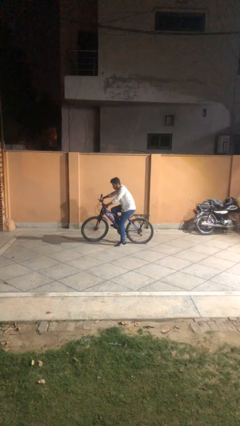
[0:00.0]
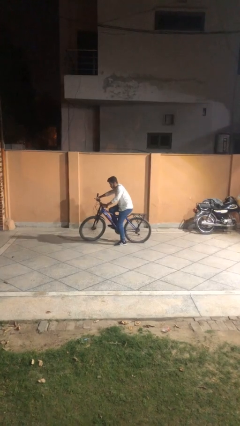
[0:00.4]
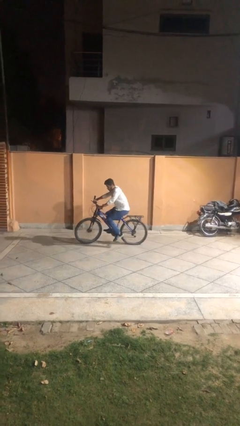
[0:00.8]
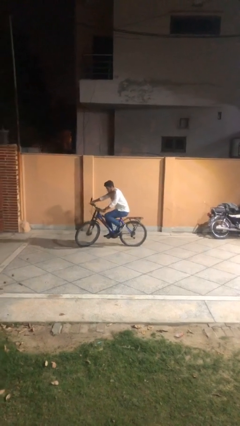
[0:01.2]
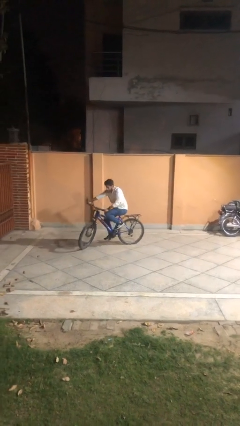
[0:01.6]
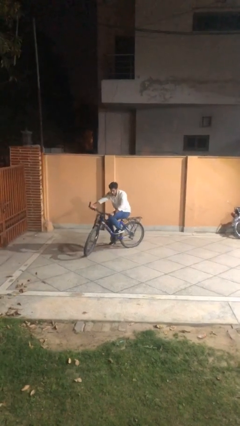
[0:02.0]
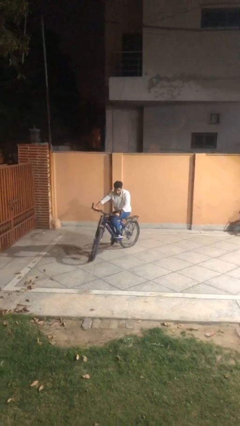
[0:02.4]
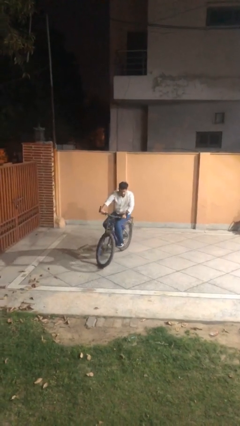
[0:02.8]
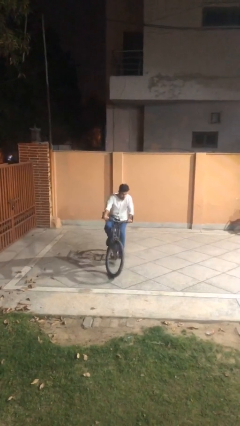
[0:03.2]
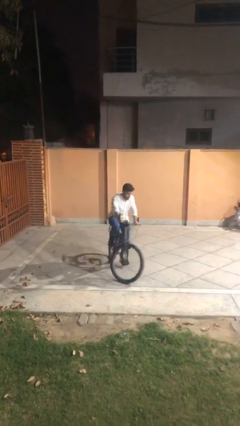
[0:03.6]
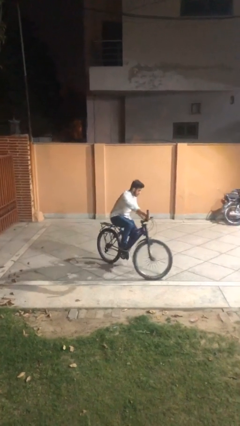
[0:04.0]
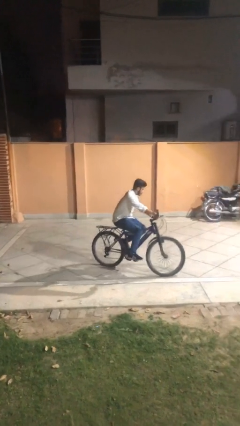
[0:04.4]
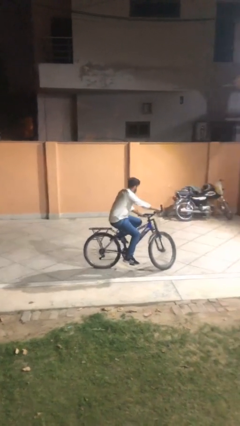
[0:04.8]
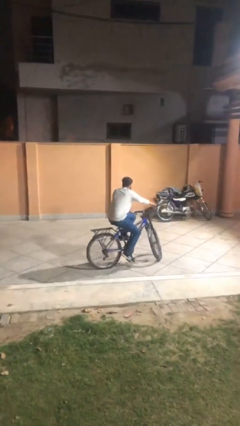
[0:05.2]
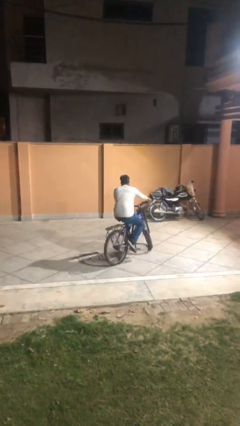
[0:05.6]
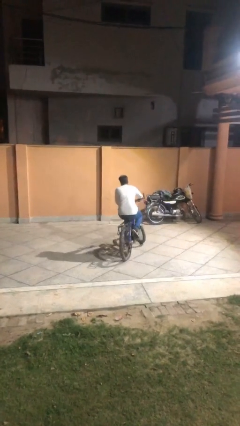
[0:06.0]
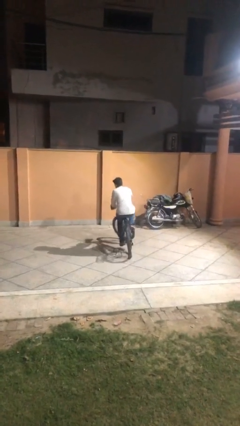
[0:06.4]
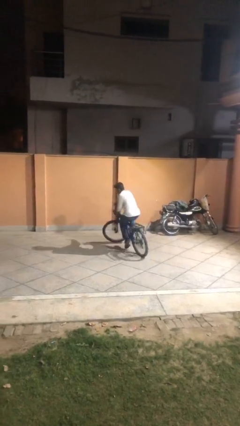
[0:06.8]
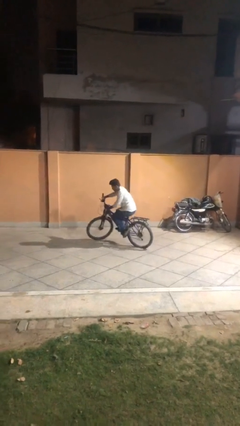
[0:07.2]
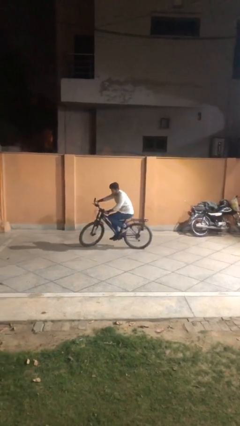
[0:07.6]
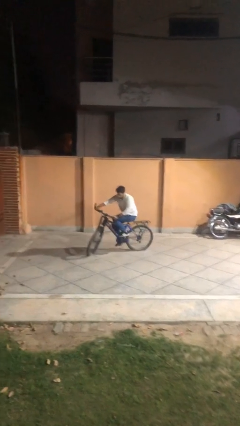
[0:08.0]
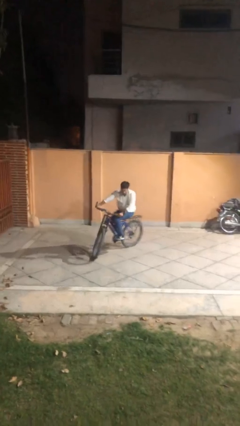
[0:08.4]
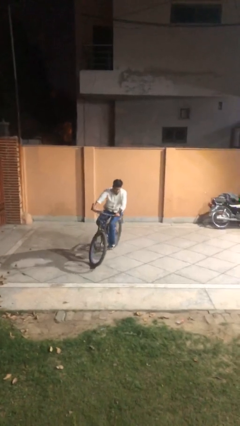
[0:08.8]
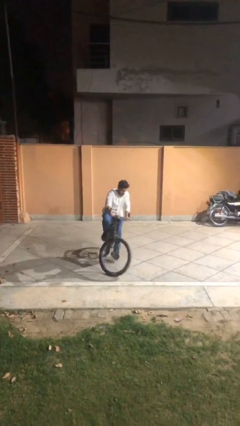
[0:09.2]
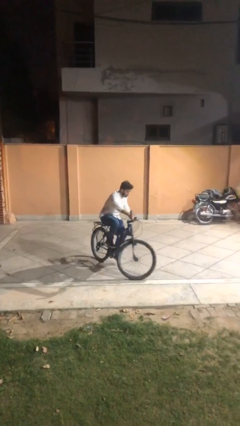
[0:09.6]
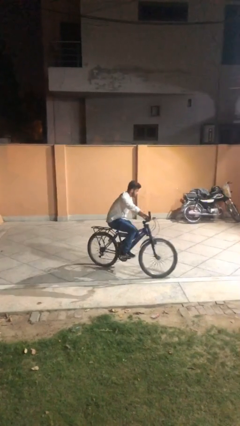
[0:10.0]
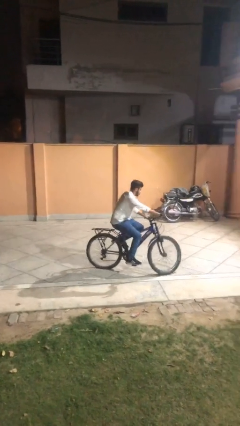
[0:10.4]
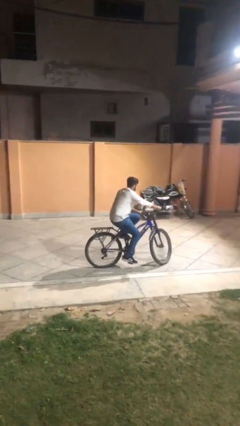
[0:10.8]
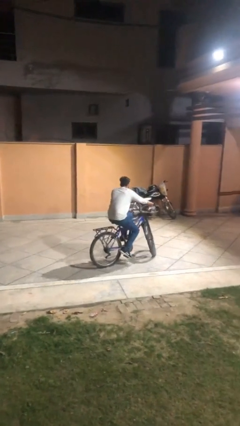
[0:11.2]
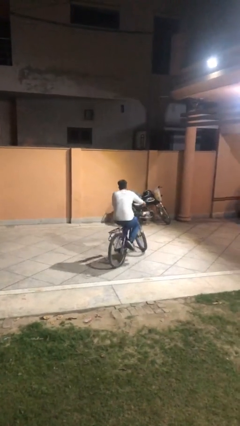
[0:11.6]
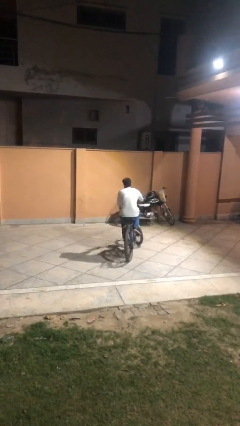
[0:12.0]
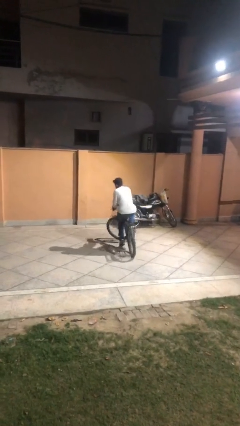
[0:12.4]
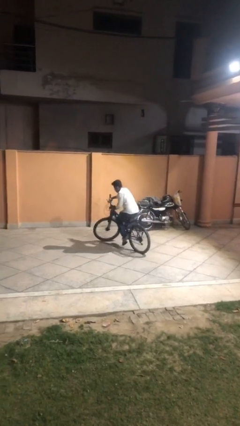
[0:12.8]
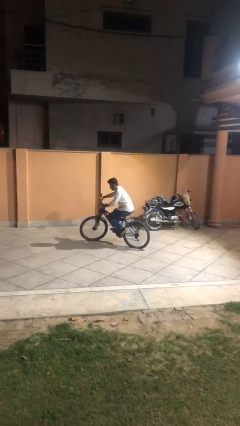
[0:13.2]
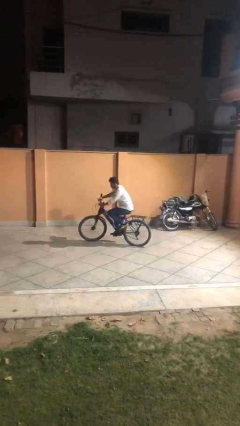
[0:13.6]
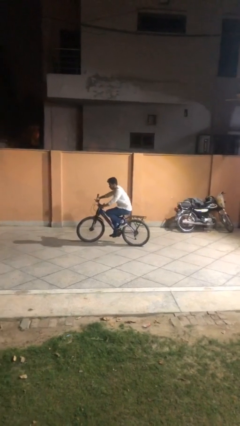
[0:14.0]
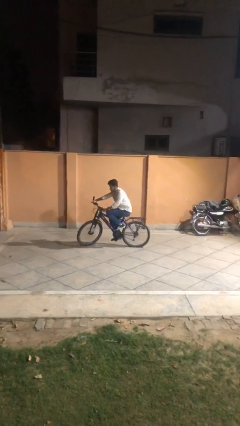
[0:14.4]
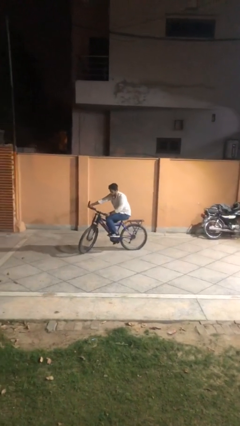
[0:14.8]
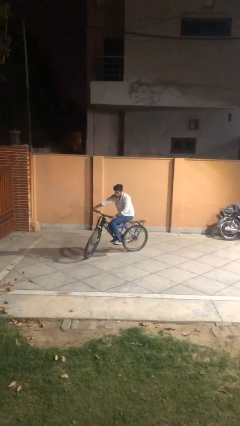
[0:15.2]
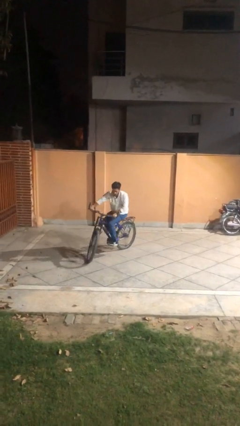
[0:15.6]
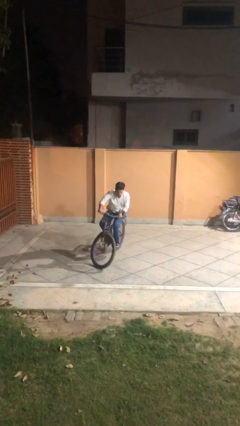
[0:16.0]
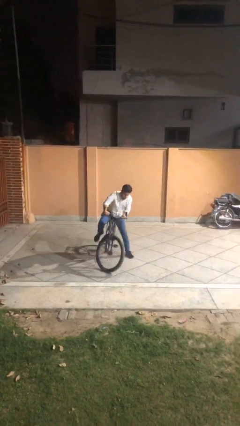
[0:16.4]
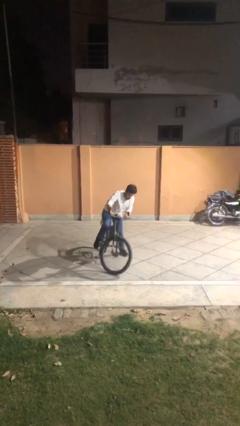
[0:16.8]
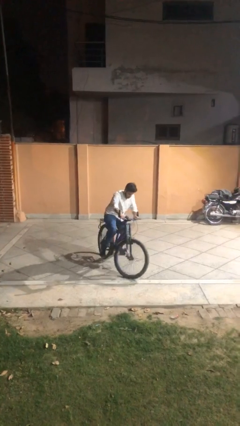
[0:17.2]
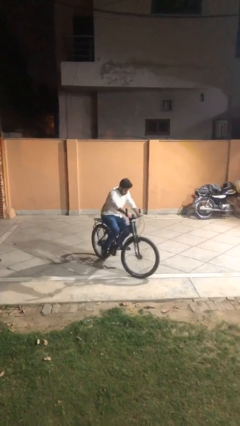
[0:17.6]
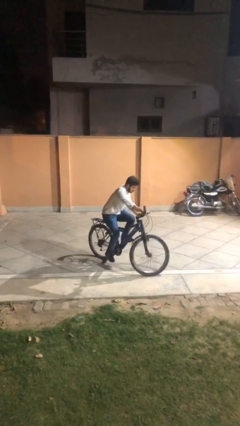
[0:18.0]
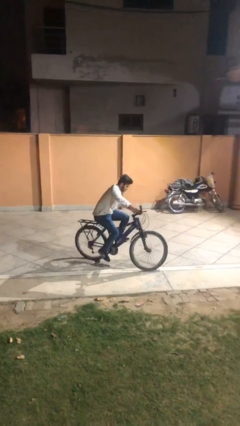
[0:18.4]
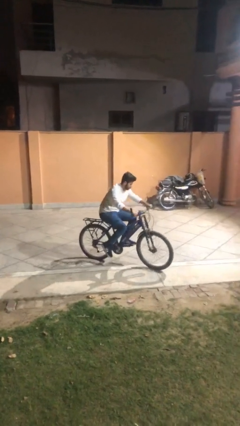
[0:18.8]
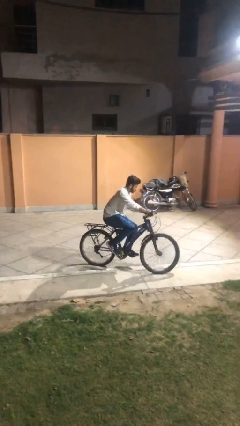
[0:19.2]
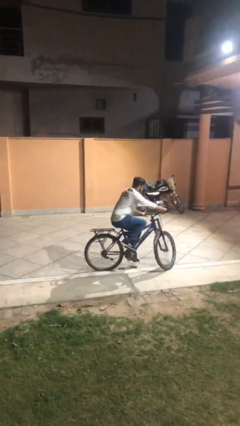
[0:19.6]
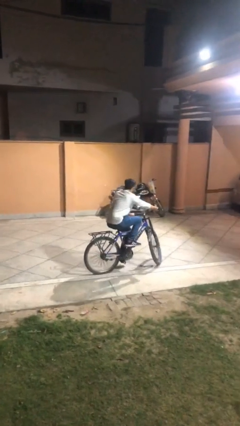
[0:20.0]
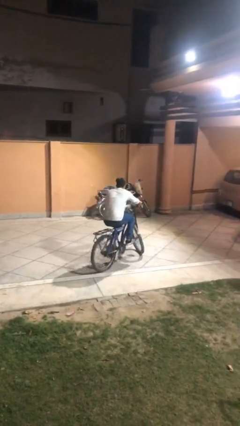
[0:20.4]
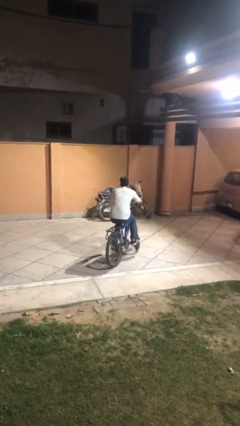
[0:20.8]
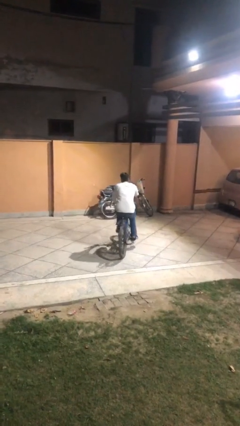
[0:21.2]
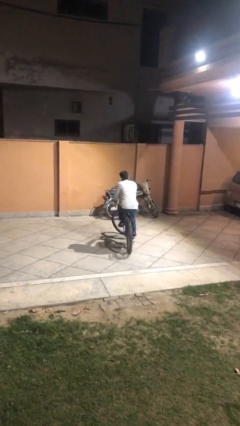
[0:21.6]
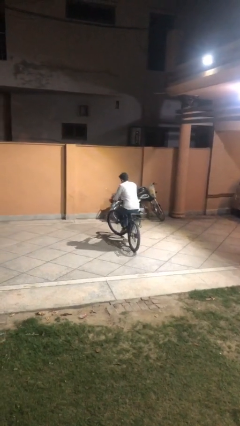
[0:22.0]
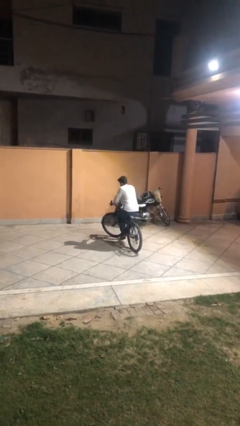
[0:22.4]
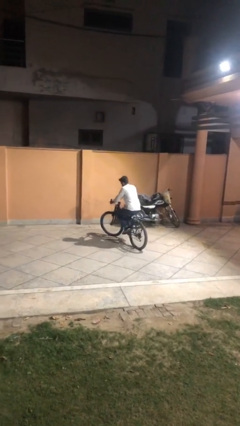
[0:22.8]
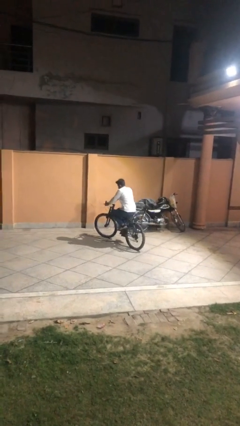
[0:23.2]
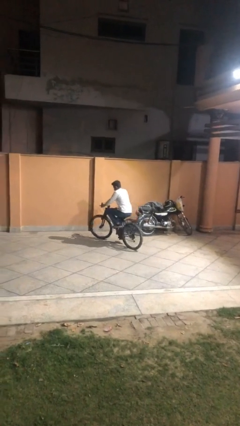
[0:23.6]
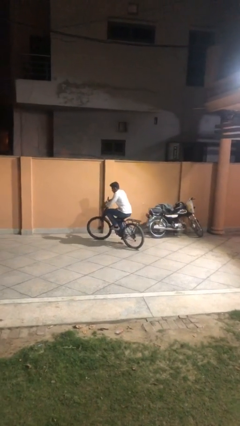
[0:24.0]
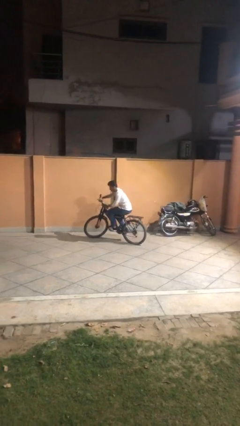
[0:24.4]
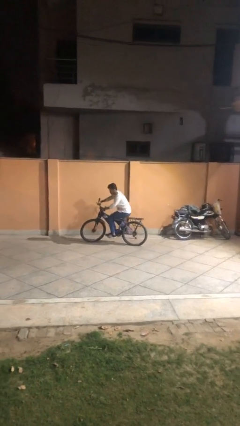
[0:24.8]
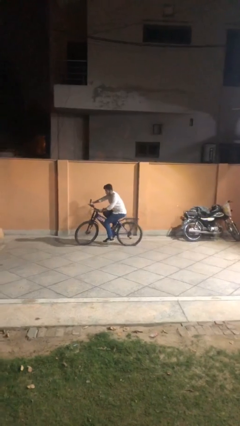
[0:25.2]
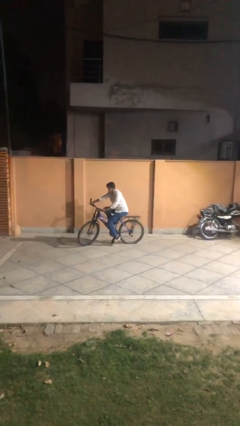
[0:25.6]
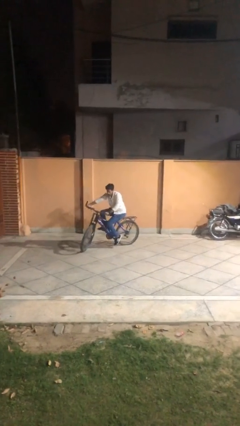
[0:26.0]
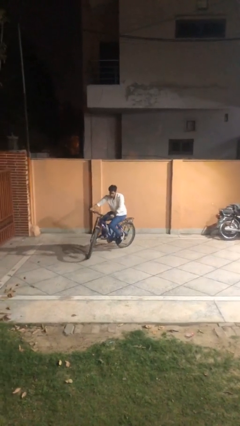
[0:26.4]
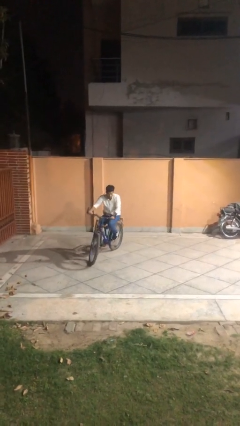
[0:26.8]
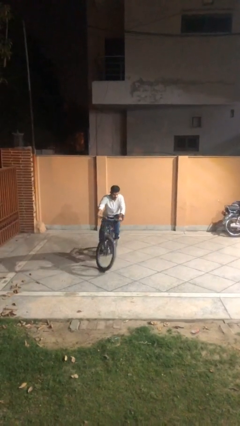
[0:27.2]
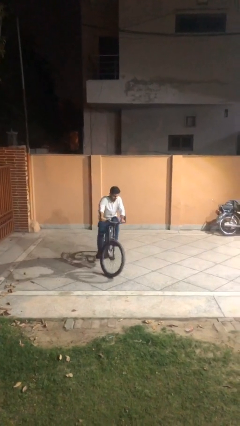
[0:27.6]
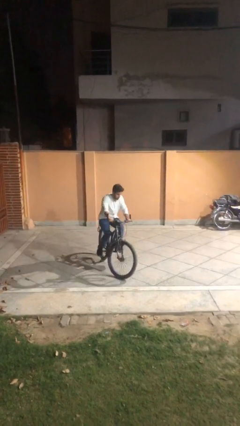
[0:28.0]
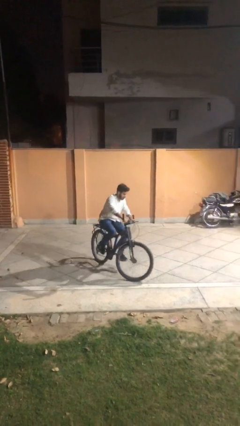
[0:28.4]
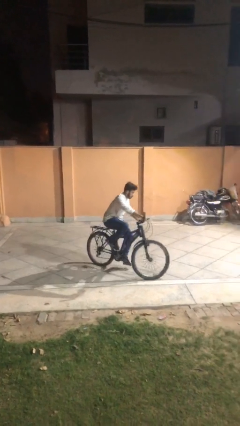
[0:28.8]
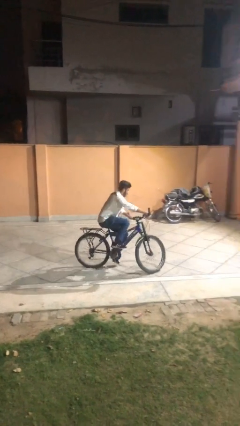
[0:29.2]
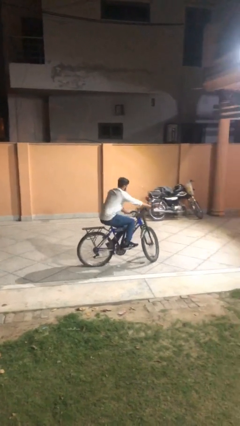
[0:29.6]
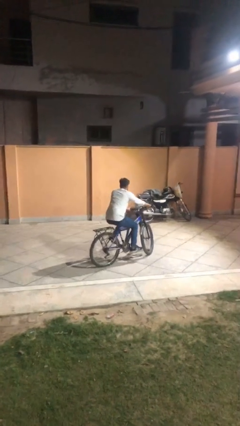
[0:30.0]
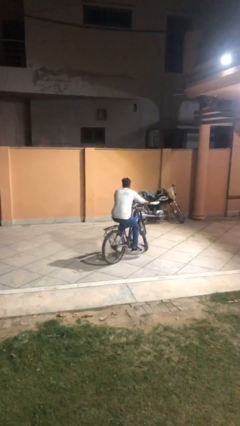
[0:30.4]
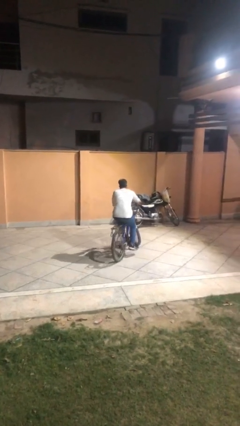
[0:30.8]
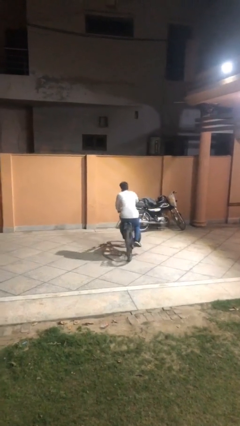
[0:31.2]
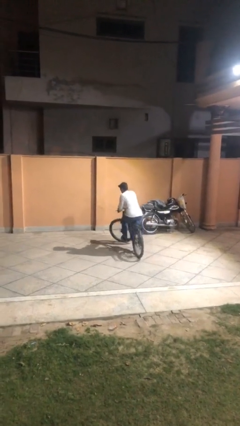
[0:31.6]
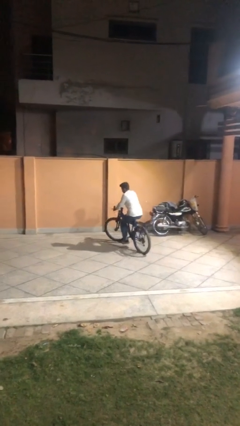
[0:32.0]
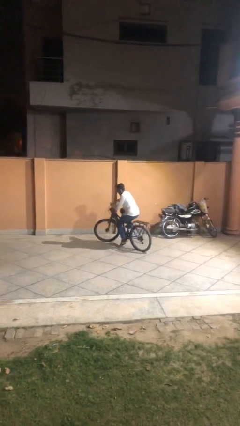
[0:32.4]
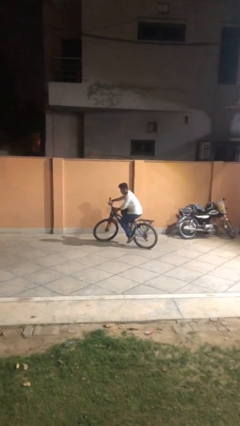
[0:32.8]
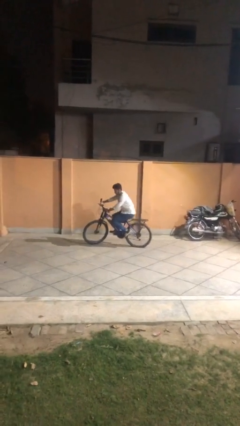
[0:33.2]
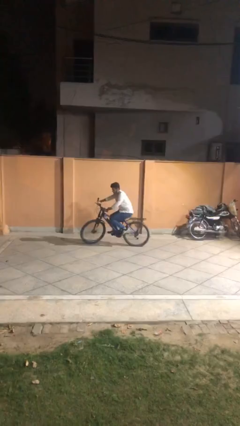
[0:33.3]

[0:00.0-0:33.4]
person rides bicycle

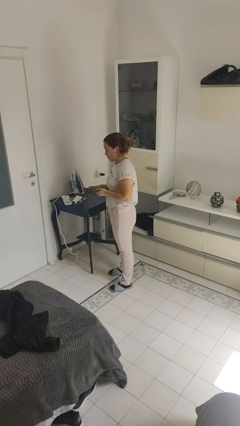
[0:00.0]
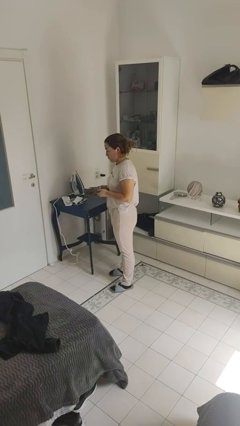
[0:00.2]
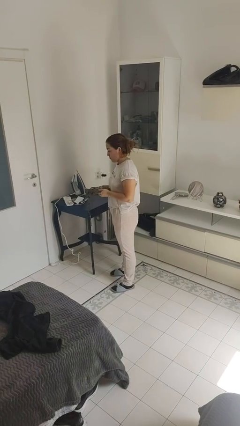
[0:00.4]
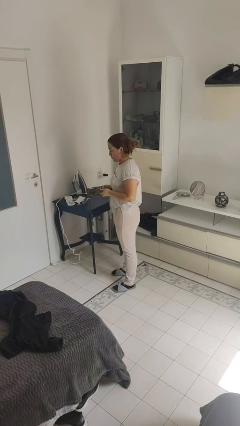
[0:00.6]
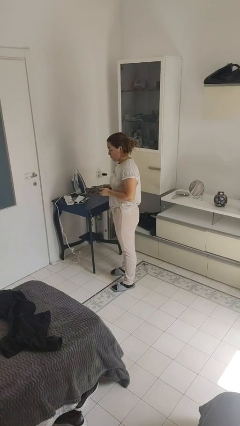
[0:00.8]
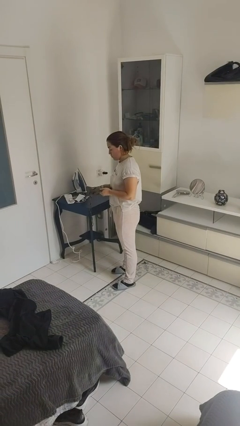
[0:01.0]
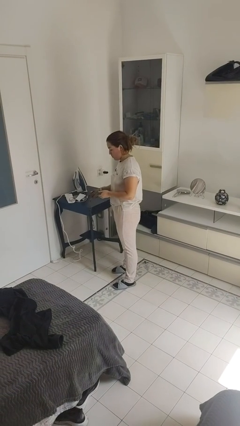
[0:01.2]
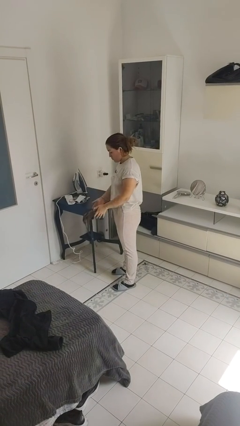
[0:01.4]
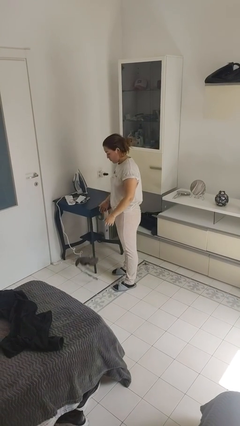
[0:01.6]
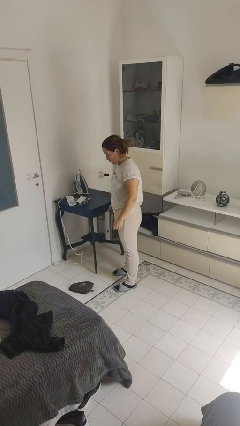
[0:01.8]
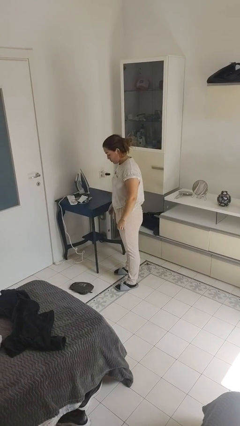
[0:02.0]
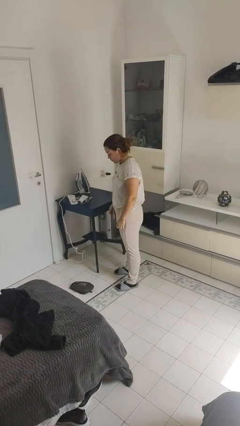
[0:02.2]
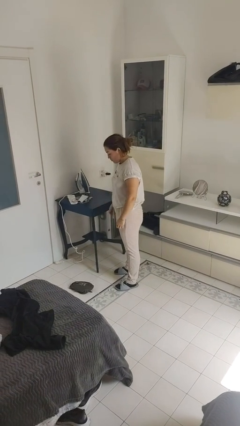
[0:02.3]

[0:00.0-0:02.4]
person drops object
